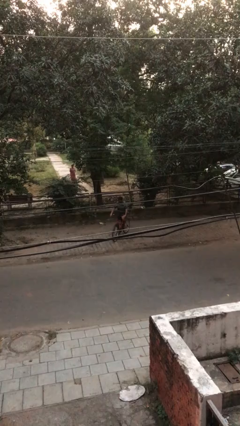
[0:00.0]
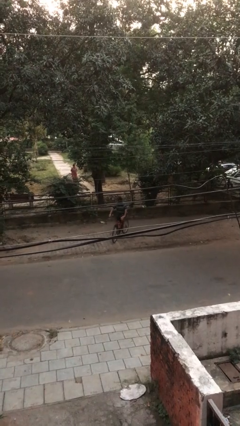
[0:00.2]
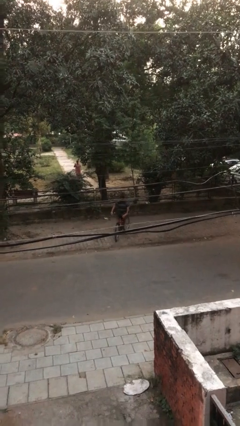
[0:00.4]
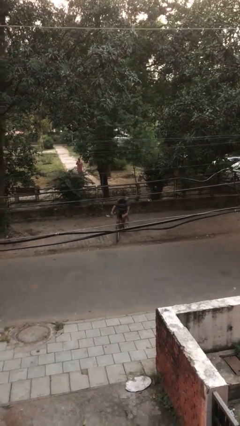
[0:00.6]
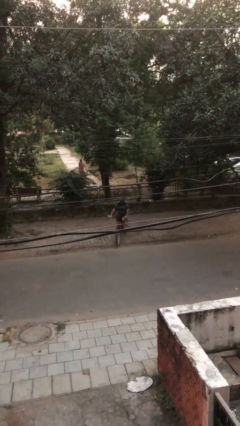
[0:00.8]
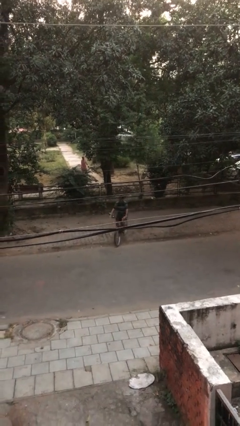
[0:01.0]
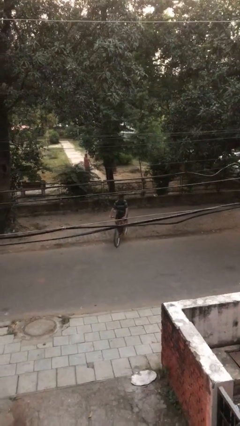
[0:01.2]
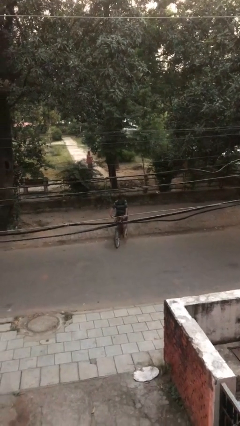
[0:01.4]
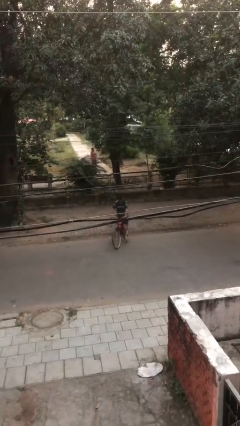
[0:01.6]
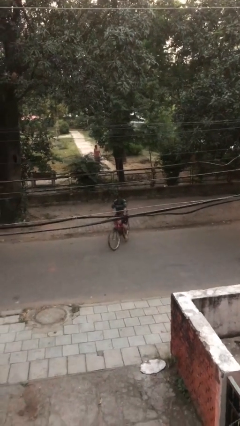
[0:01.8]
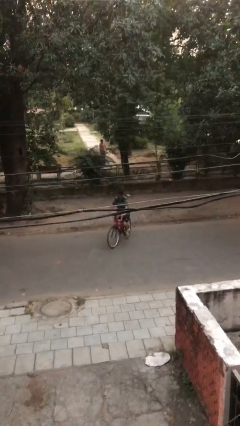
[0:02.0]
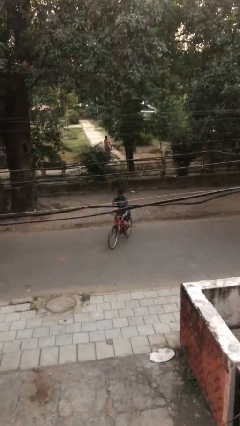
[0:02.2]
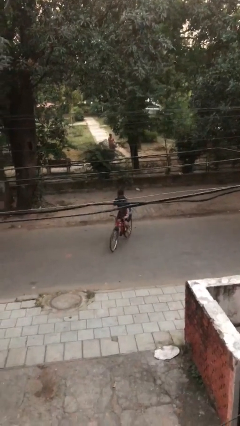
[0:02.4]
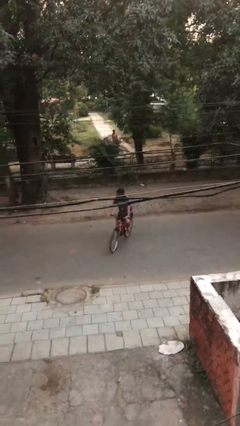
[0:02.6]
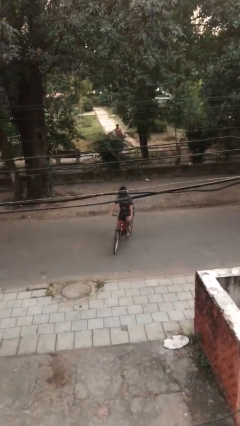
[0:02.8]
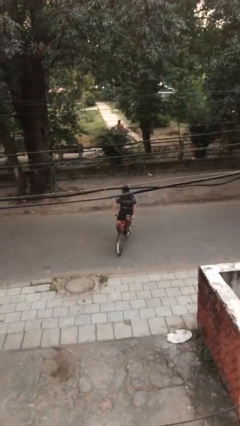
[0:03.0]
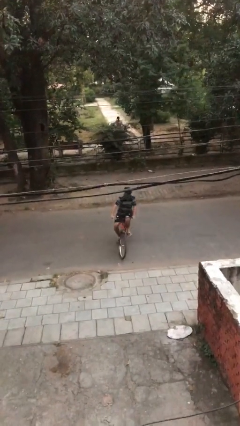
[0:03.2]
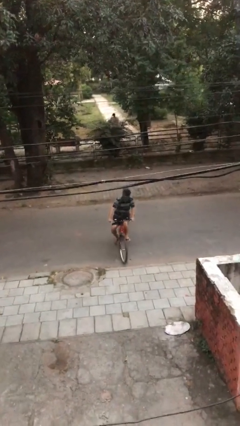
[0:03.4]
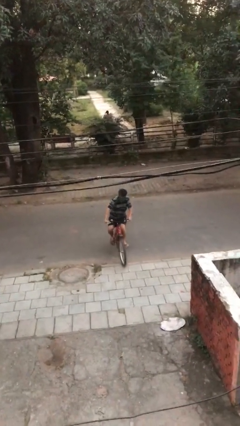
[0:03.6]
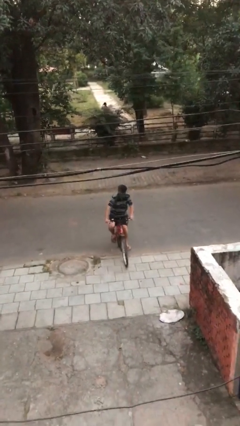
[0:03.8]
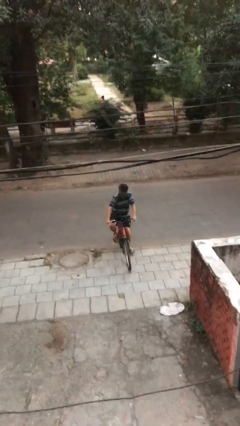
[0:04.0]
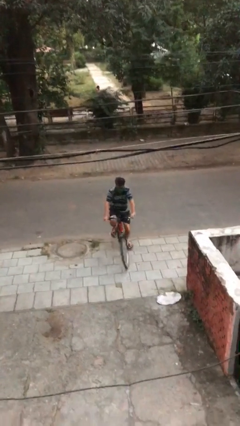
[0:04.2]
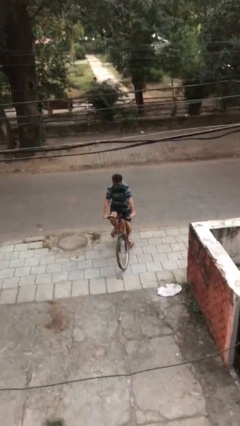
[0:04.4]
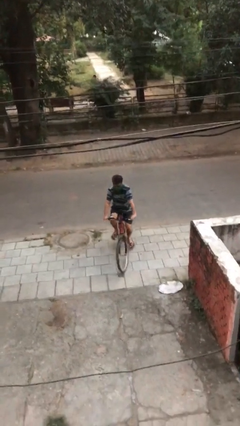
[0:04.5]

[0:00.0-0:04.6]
person rides bicycle

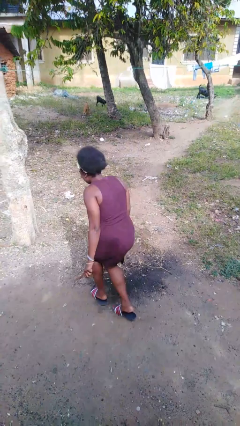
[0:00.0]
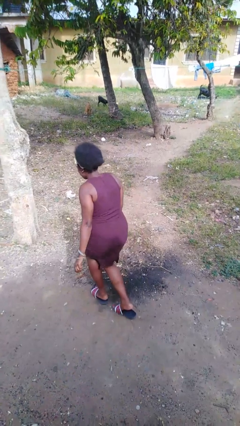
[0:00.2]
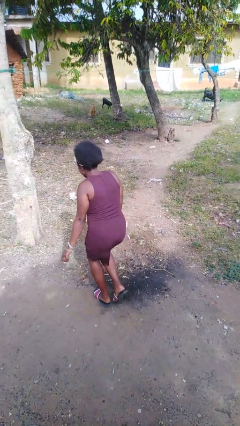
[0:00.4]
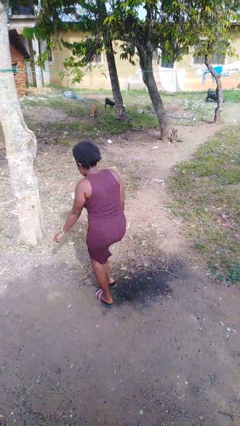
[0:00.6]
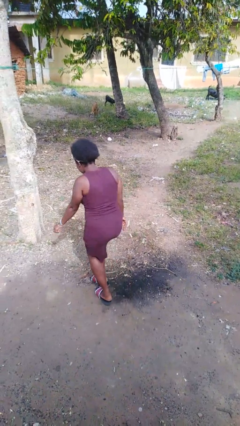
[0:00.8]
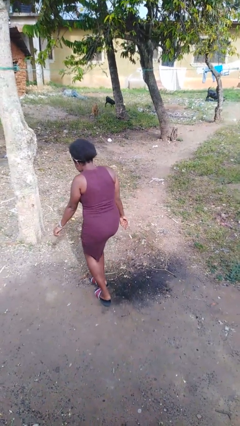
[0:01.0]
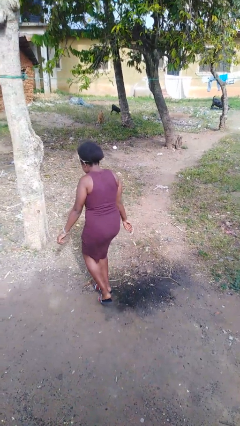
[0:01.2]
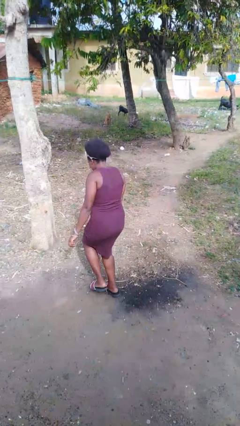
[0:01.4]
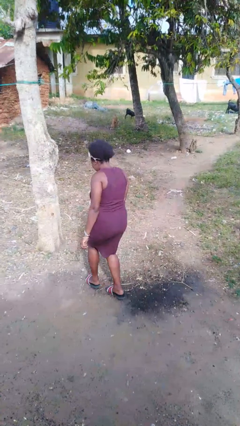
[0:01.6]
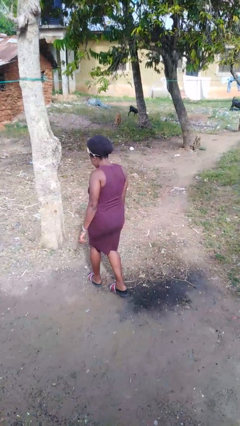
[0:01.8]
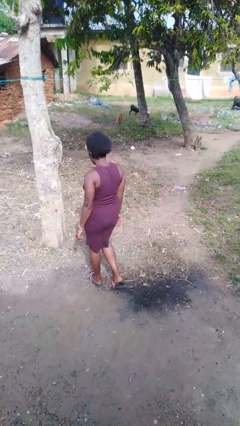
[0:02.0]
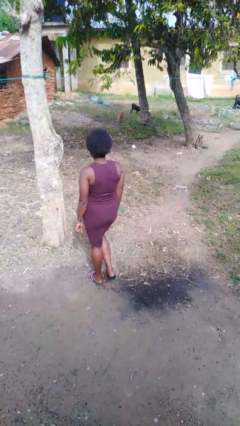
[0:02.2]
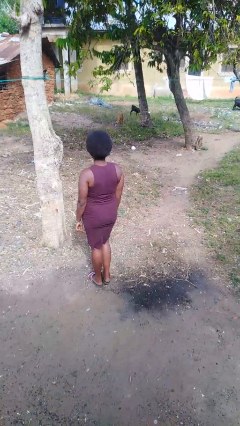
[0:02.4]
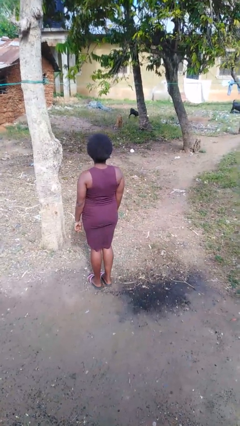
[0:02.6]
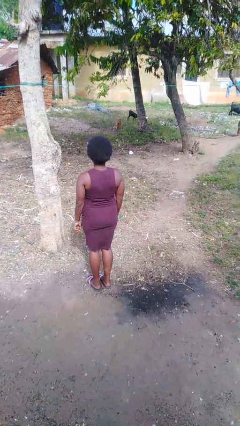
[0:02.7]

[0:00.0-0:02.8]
person walks tiptoe

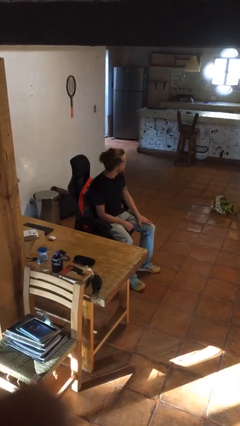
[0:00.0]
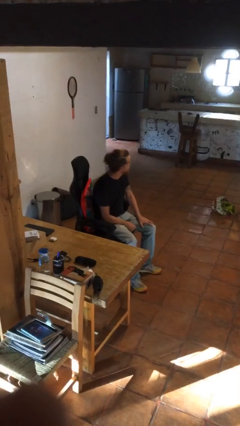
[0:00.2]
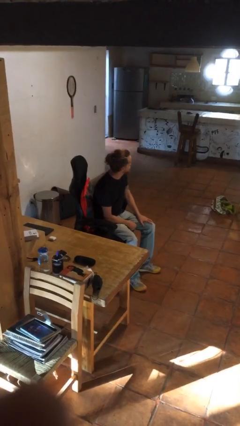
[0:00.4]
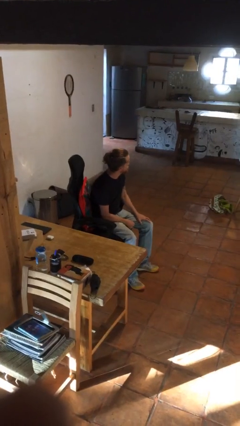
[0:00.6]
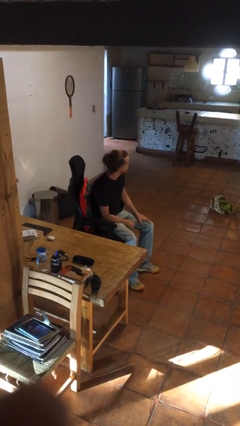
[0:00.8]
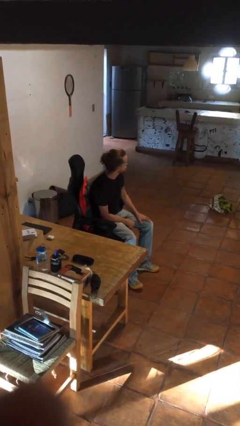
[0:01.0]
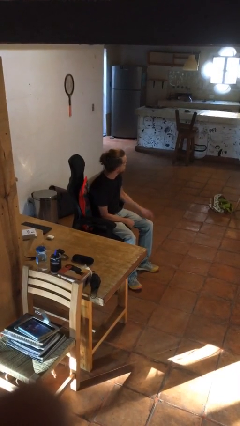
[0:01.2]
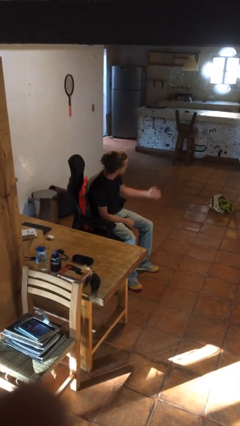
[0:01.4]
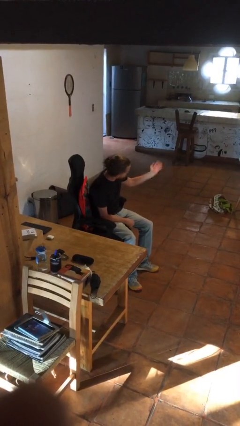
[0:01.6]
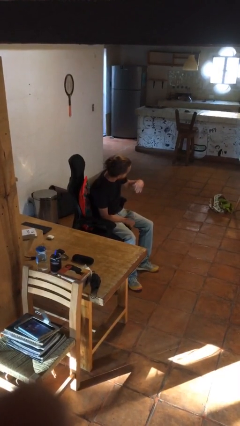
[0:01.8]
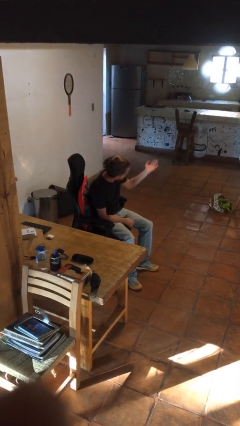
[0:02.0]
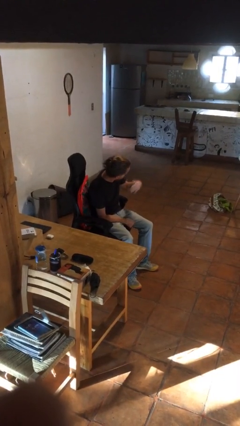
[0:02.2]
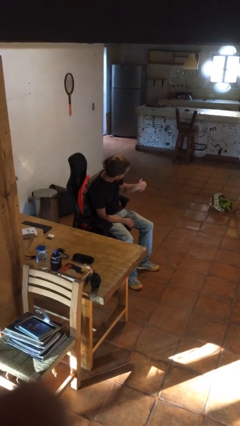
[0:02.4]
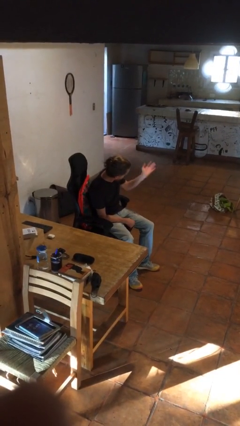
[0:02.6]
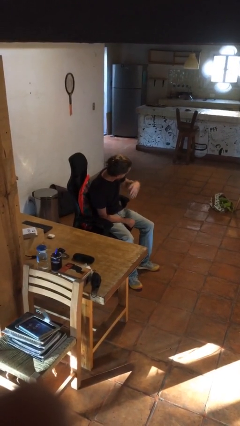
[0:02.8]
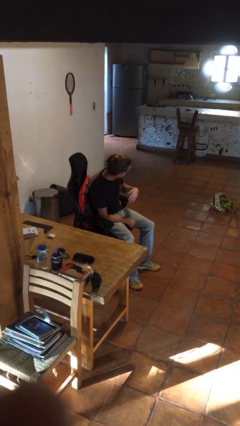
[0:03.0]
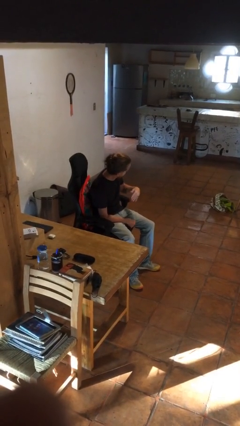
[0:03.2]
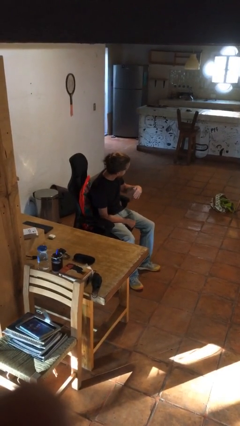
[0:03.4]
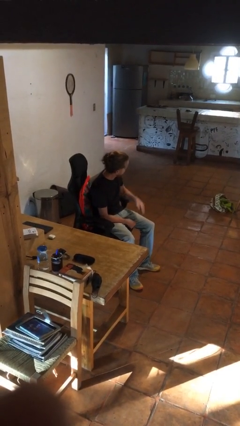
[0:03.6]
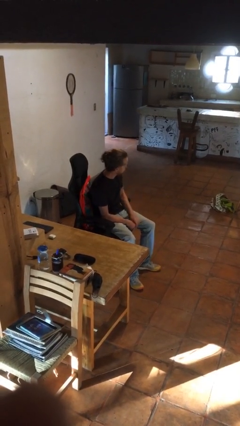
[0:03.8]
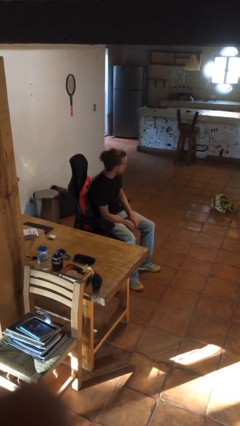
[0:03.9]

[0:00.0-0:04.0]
person gestures come here

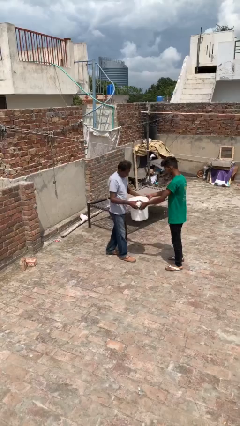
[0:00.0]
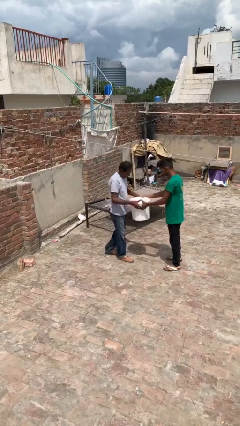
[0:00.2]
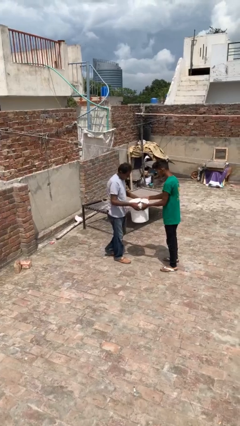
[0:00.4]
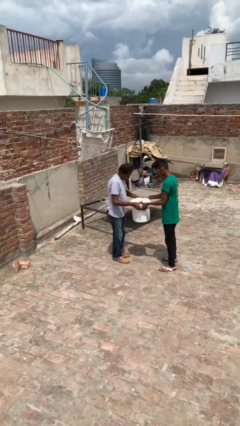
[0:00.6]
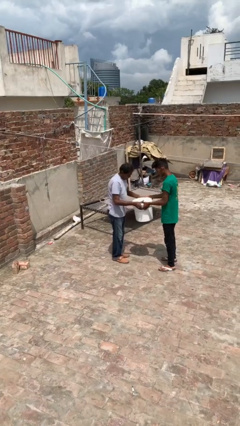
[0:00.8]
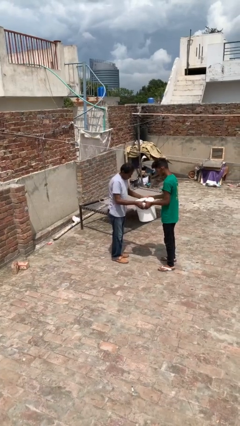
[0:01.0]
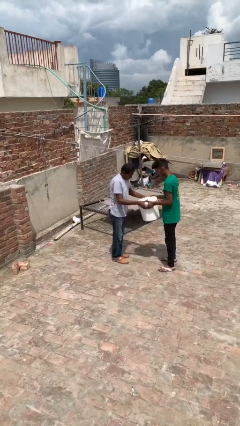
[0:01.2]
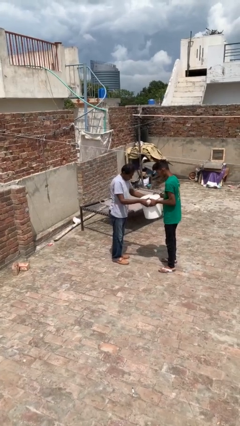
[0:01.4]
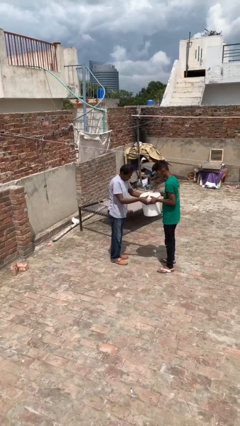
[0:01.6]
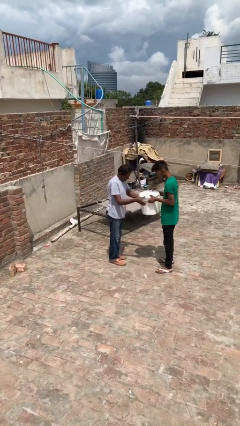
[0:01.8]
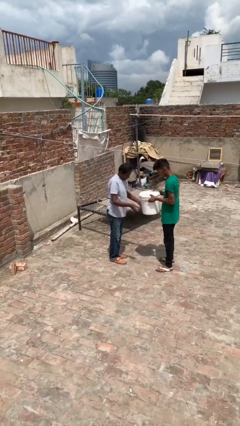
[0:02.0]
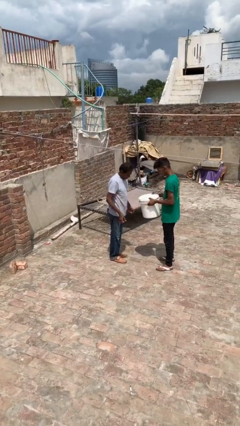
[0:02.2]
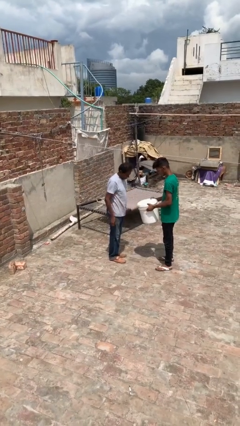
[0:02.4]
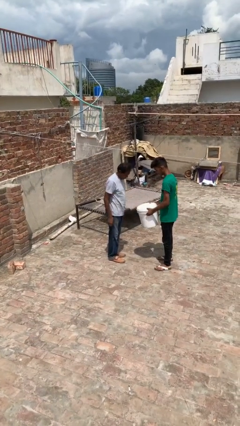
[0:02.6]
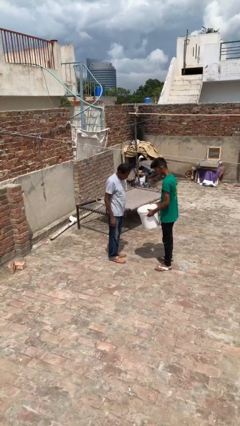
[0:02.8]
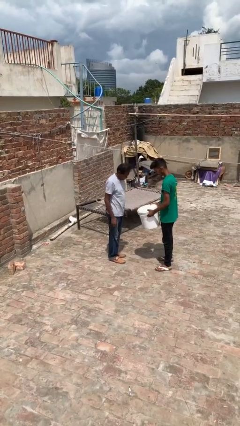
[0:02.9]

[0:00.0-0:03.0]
person transfers object to person

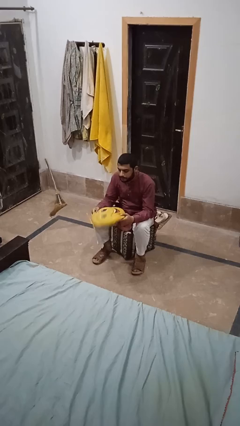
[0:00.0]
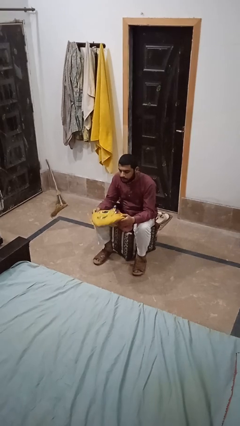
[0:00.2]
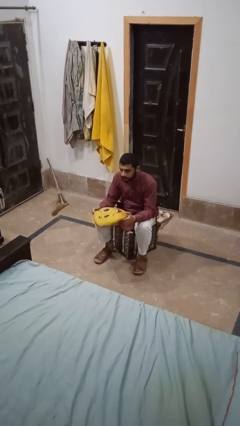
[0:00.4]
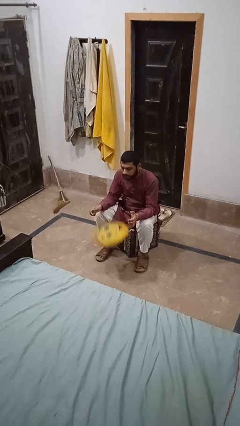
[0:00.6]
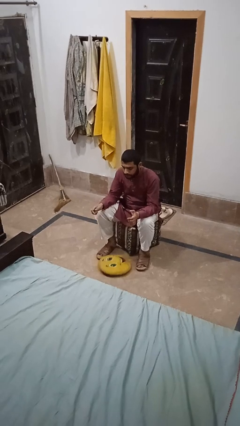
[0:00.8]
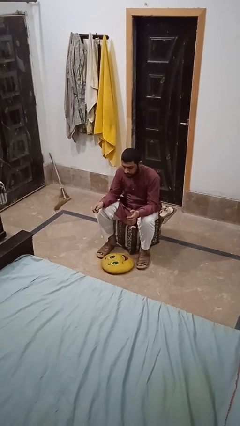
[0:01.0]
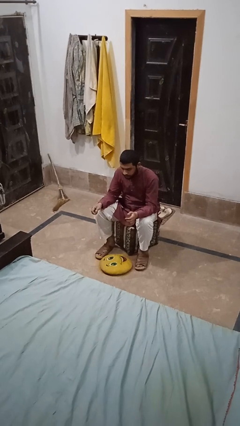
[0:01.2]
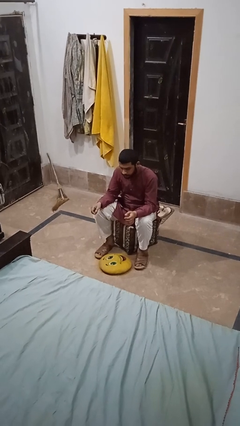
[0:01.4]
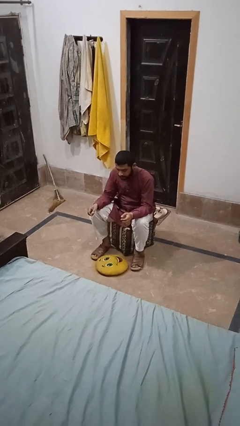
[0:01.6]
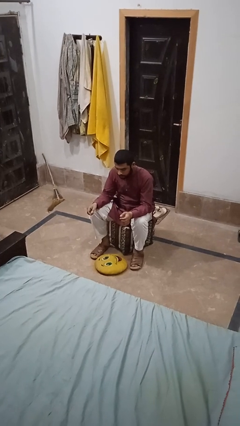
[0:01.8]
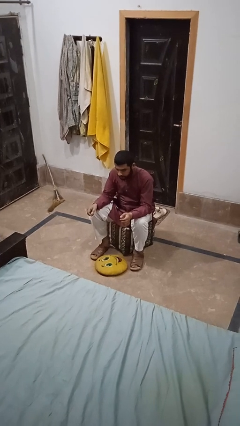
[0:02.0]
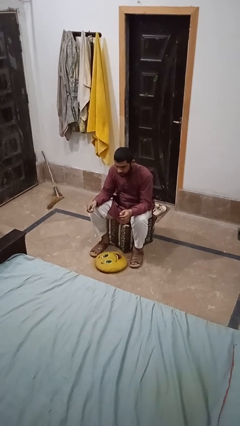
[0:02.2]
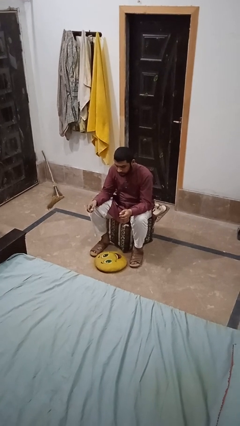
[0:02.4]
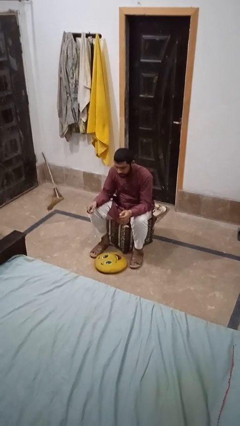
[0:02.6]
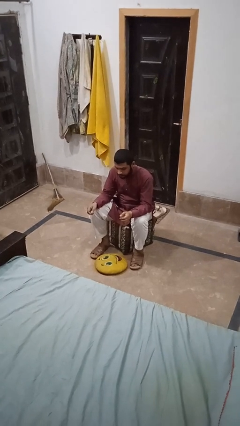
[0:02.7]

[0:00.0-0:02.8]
person drops object
